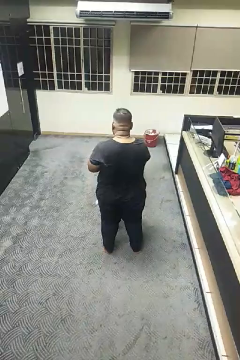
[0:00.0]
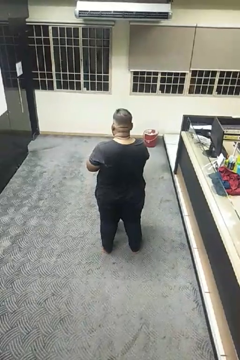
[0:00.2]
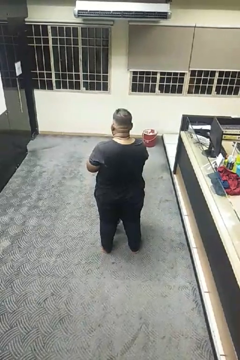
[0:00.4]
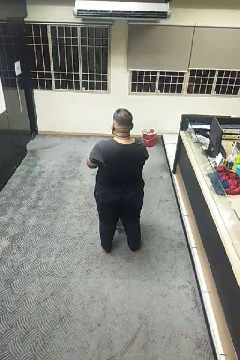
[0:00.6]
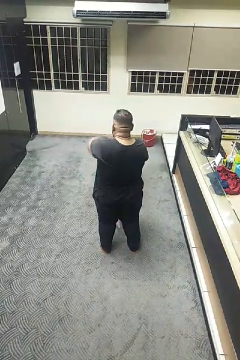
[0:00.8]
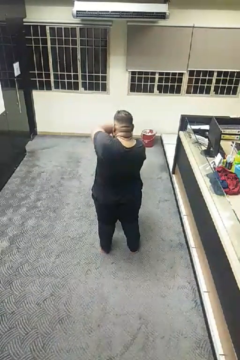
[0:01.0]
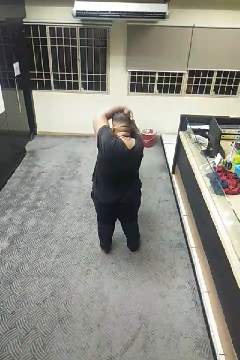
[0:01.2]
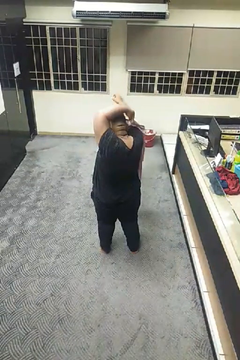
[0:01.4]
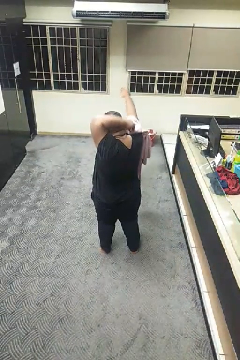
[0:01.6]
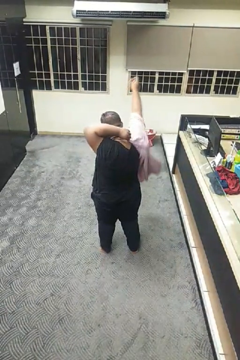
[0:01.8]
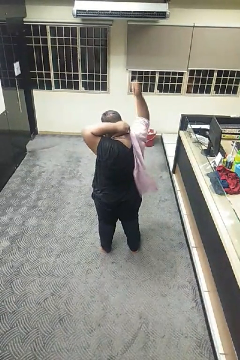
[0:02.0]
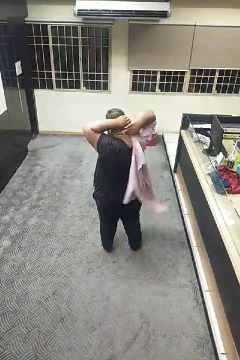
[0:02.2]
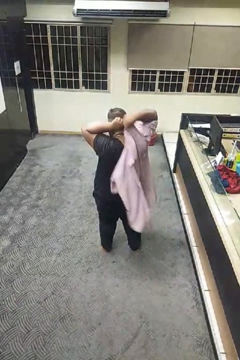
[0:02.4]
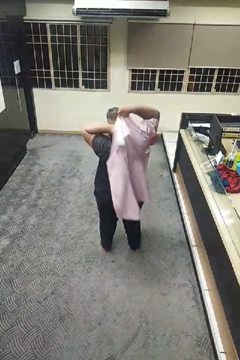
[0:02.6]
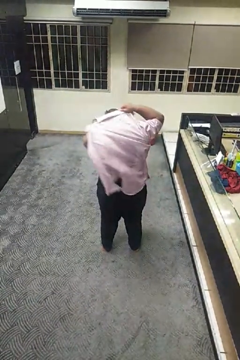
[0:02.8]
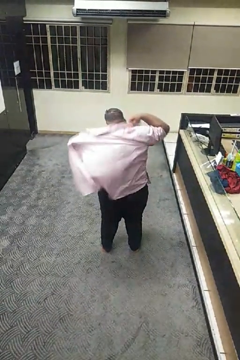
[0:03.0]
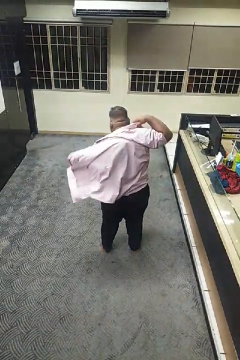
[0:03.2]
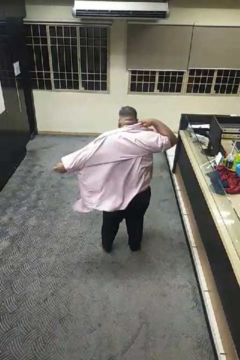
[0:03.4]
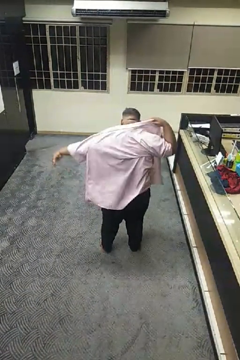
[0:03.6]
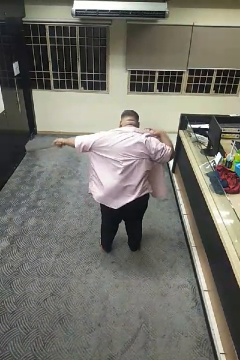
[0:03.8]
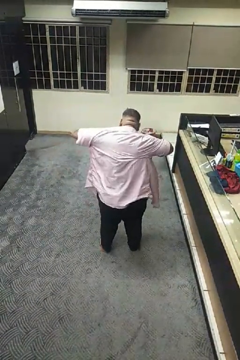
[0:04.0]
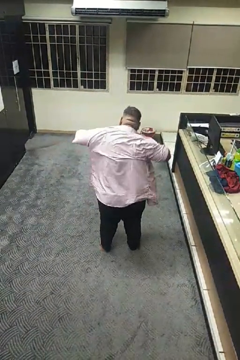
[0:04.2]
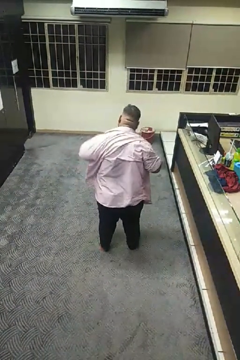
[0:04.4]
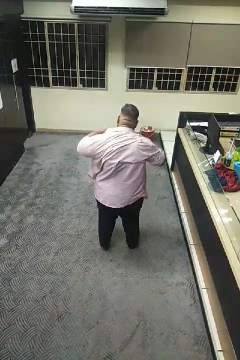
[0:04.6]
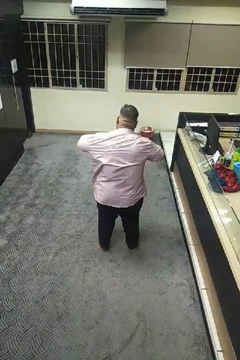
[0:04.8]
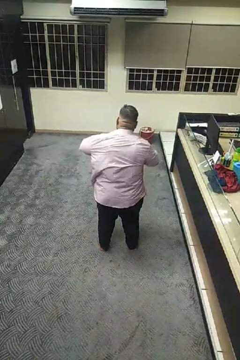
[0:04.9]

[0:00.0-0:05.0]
person puts on shirt

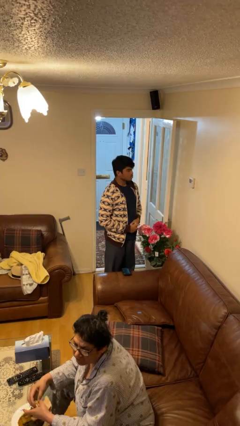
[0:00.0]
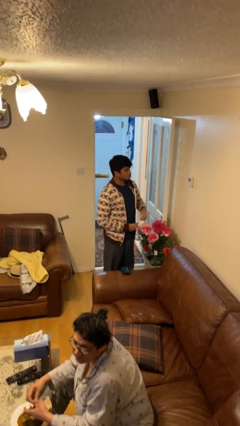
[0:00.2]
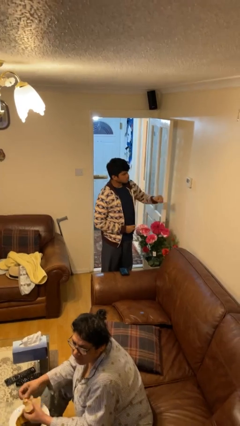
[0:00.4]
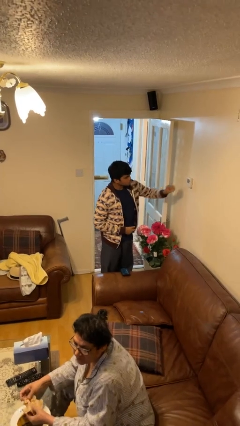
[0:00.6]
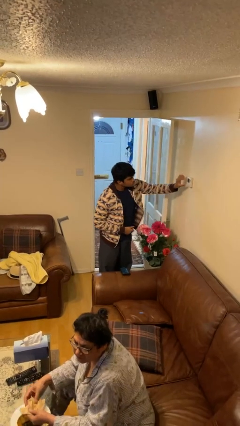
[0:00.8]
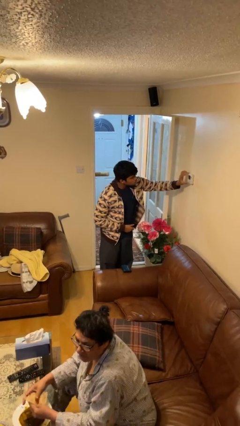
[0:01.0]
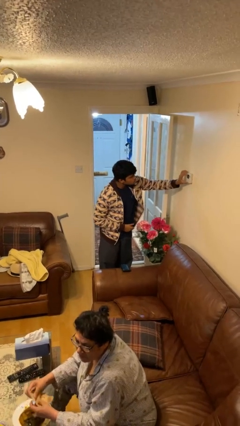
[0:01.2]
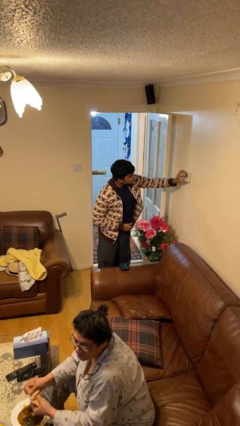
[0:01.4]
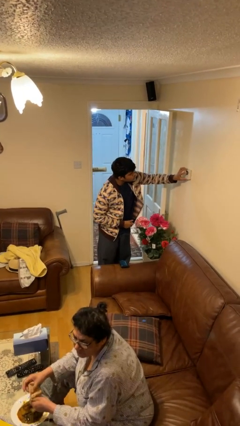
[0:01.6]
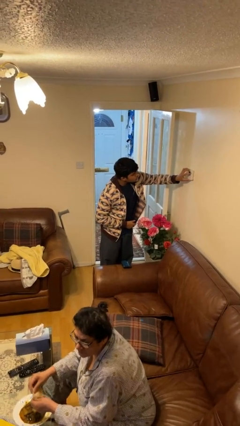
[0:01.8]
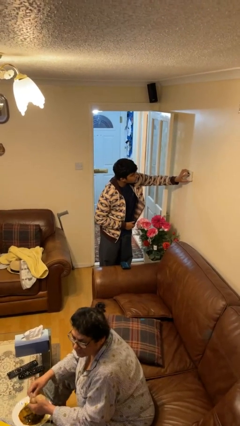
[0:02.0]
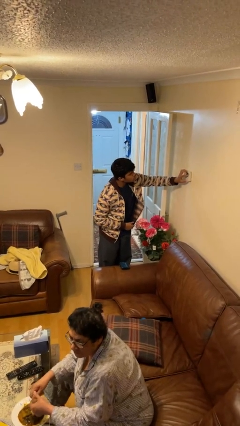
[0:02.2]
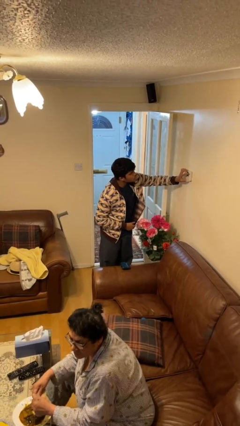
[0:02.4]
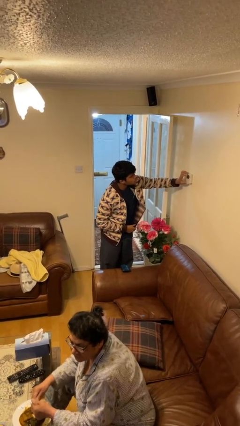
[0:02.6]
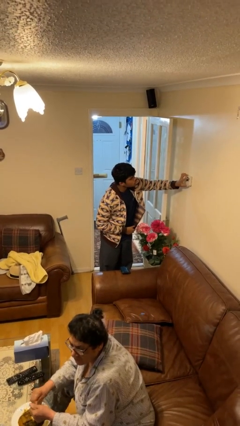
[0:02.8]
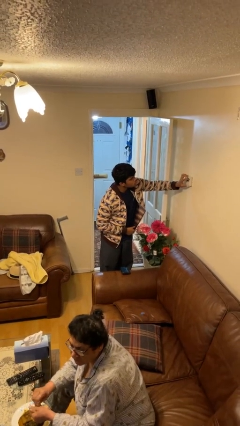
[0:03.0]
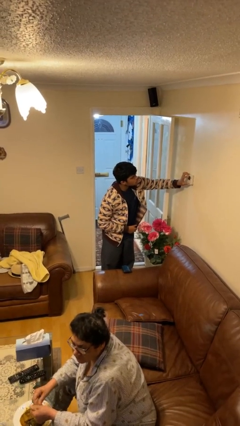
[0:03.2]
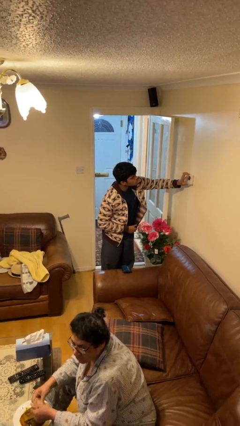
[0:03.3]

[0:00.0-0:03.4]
person adjusts thermostat

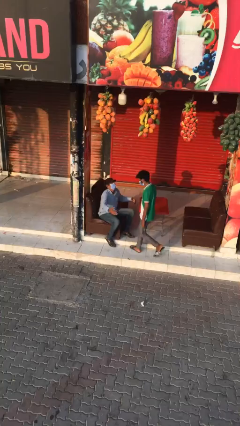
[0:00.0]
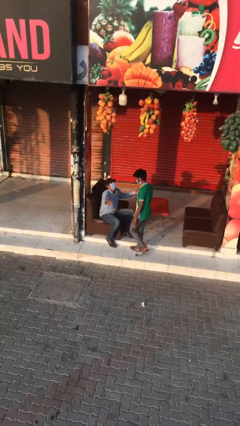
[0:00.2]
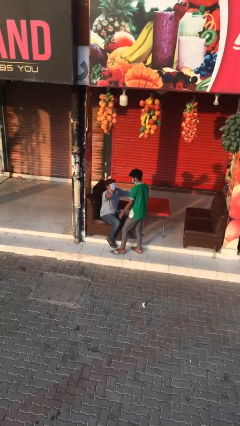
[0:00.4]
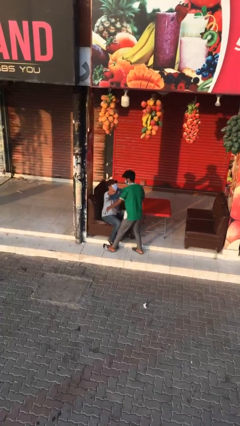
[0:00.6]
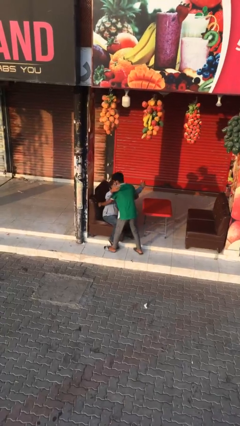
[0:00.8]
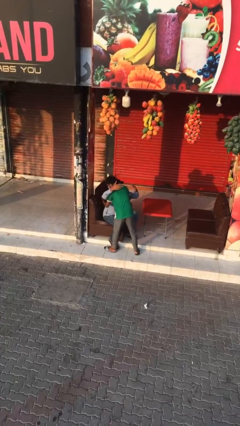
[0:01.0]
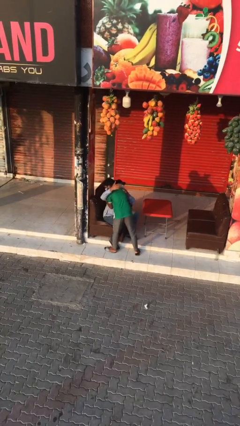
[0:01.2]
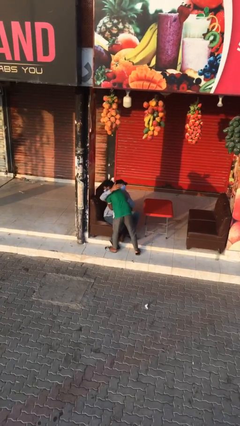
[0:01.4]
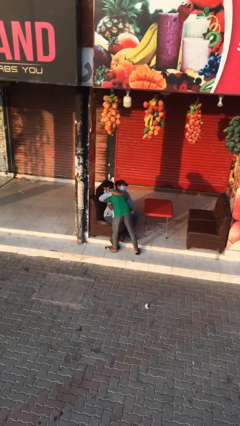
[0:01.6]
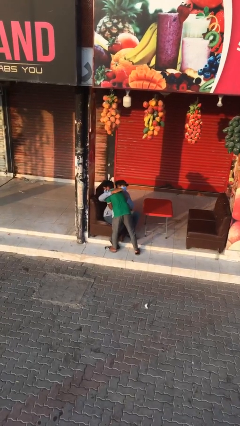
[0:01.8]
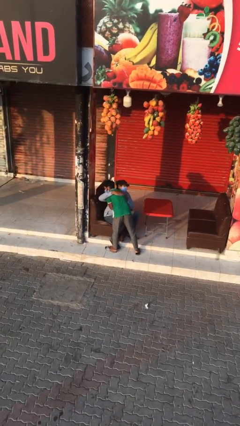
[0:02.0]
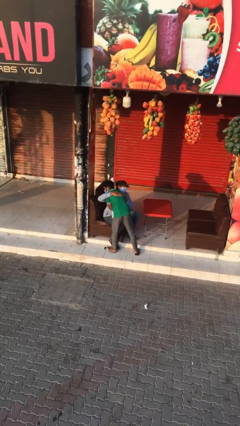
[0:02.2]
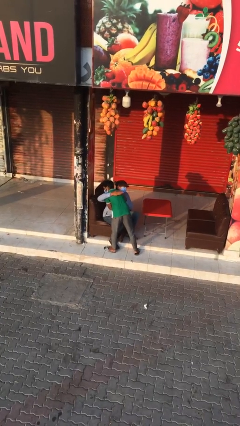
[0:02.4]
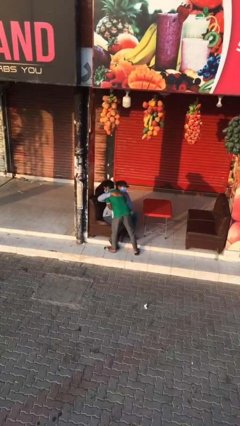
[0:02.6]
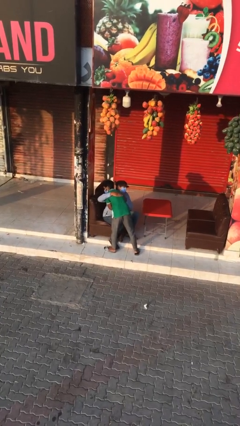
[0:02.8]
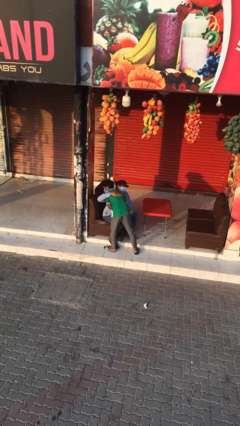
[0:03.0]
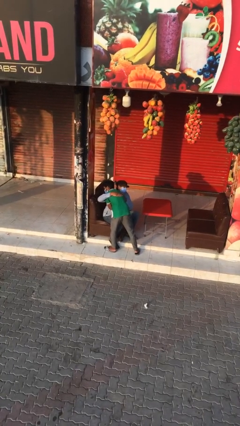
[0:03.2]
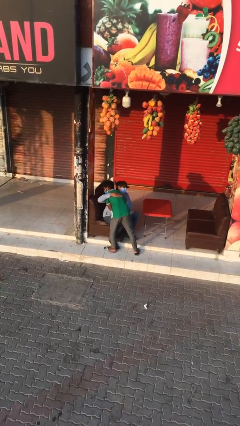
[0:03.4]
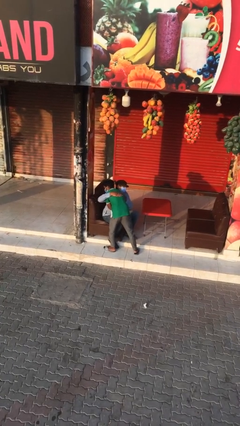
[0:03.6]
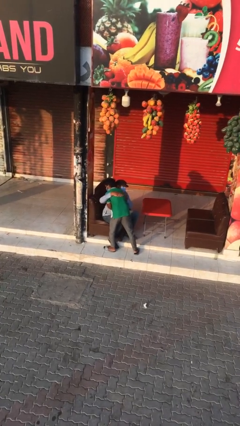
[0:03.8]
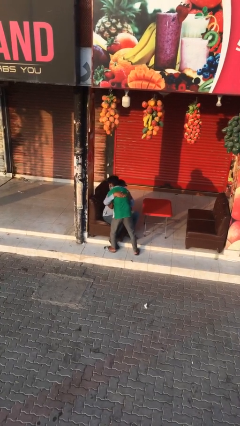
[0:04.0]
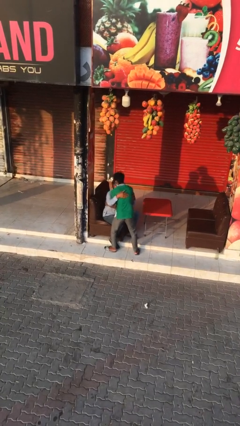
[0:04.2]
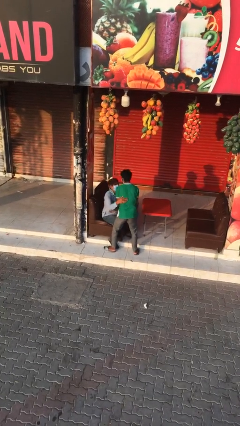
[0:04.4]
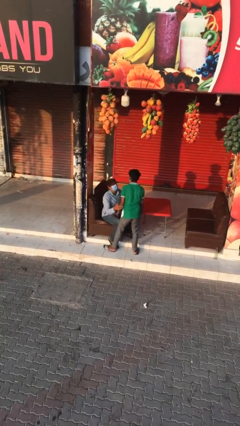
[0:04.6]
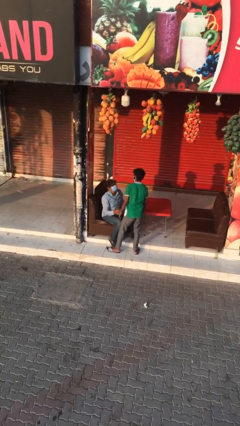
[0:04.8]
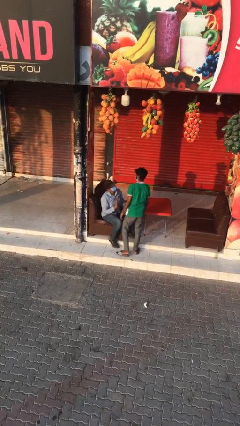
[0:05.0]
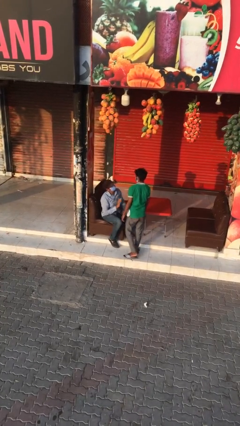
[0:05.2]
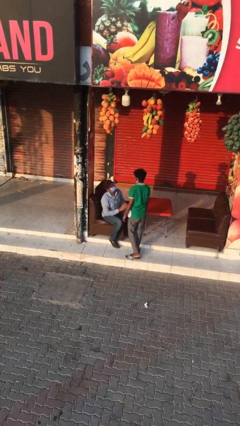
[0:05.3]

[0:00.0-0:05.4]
person embraces person

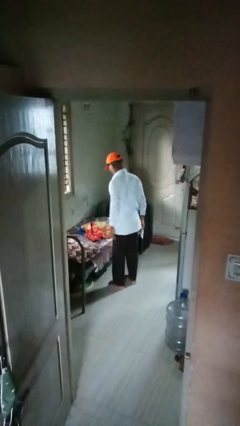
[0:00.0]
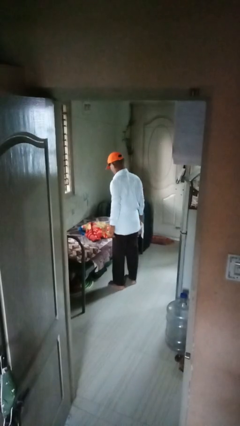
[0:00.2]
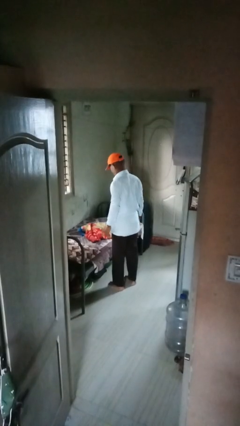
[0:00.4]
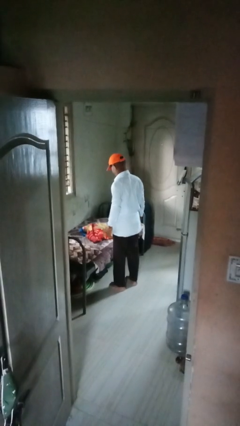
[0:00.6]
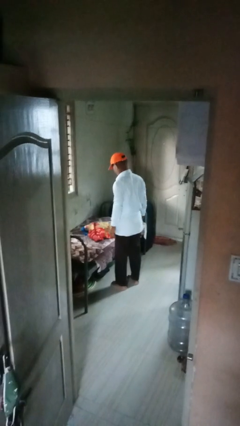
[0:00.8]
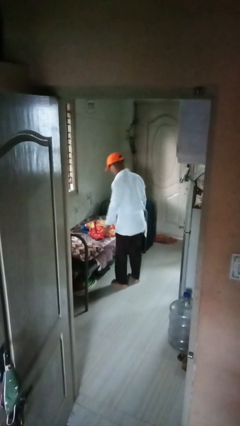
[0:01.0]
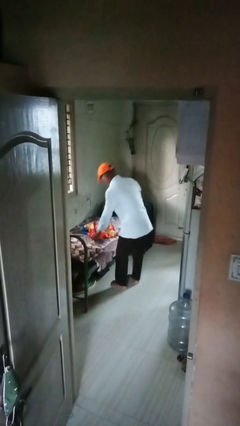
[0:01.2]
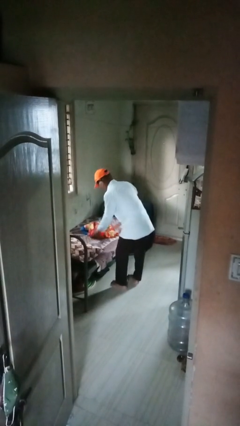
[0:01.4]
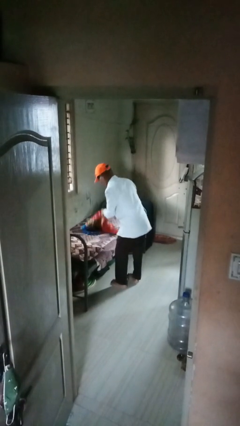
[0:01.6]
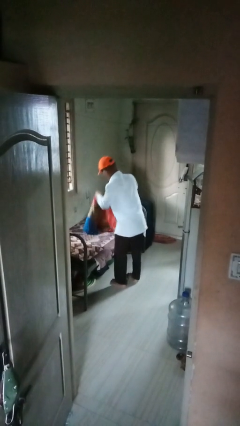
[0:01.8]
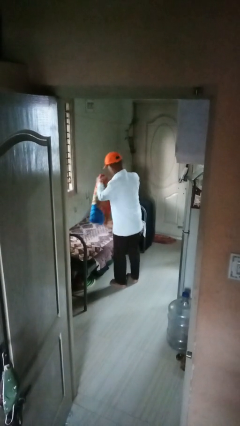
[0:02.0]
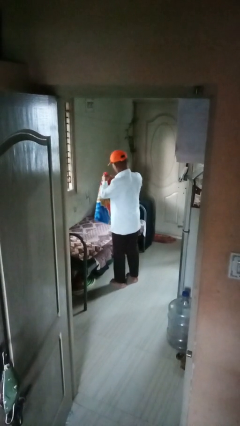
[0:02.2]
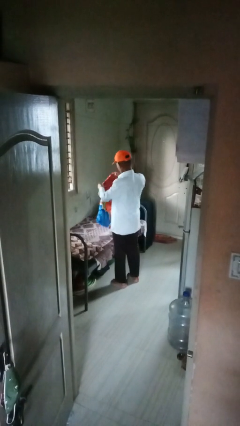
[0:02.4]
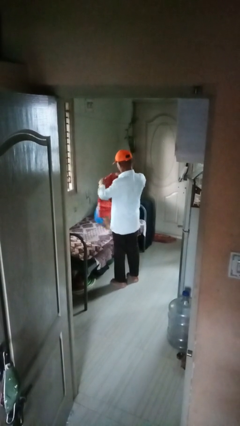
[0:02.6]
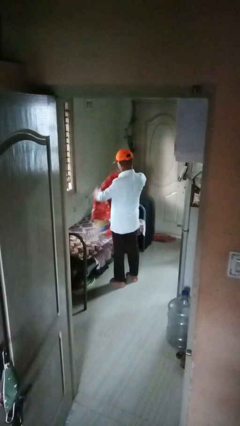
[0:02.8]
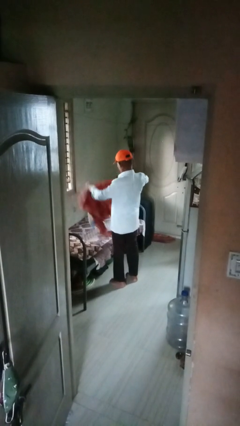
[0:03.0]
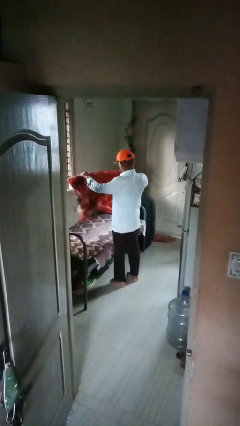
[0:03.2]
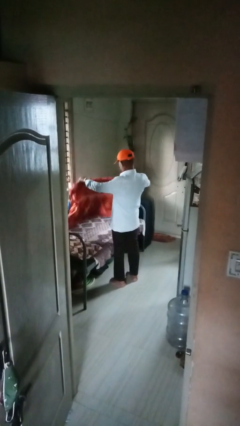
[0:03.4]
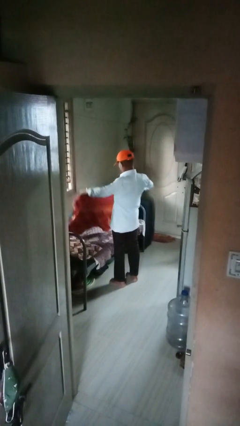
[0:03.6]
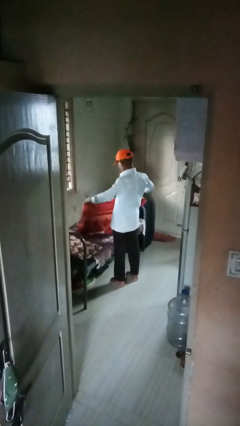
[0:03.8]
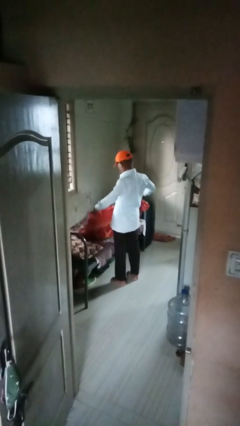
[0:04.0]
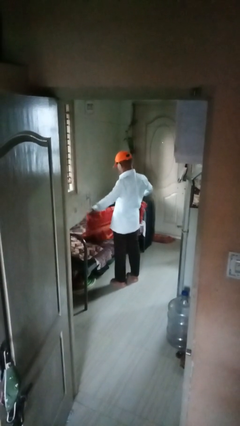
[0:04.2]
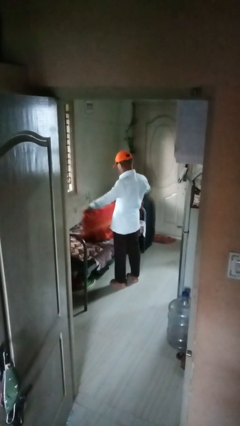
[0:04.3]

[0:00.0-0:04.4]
person unfolds blanket
